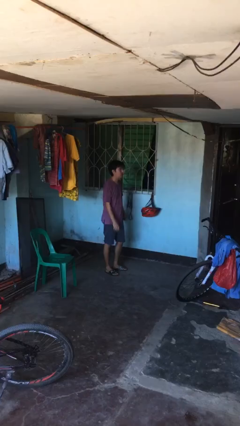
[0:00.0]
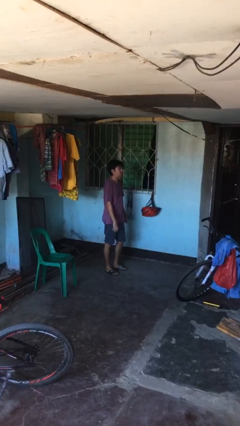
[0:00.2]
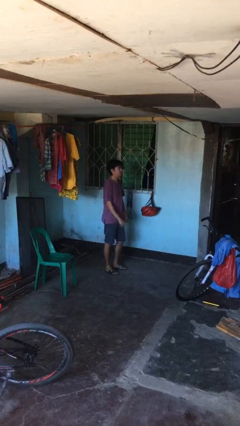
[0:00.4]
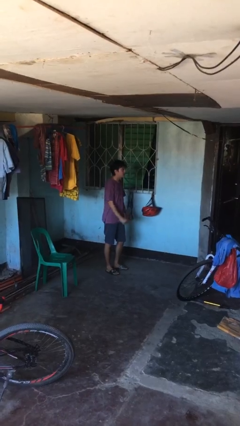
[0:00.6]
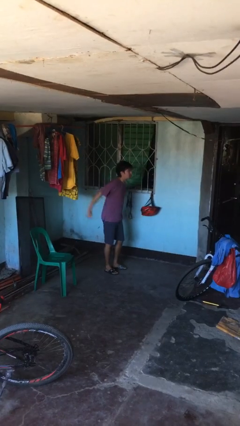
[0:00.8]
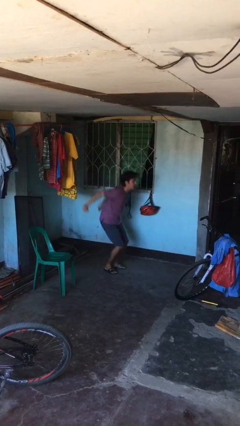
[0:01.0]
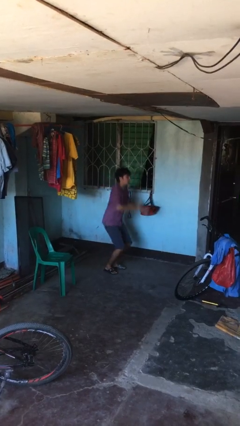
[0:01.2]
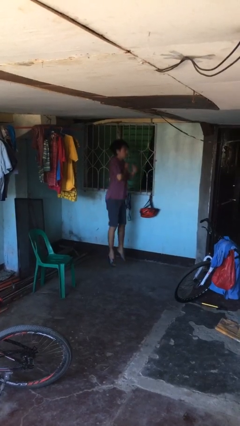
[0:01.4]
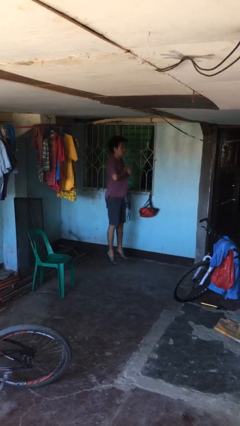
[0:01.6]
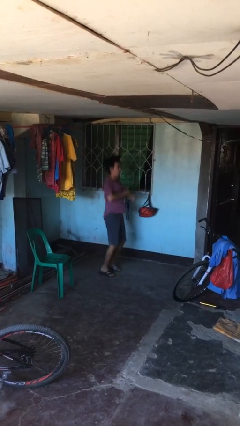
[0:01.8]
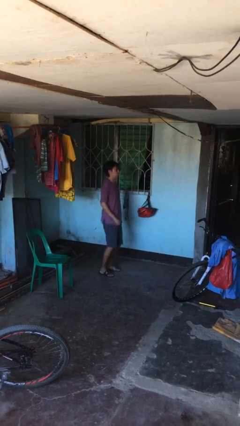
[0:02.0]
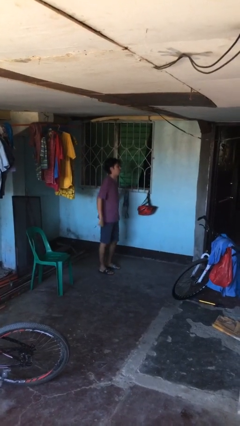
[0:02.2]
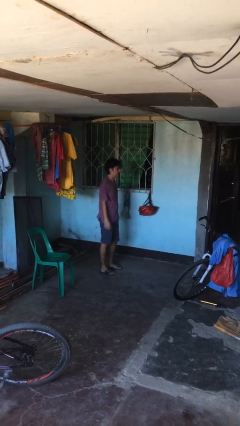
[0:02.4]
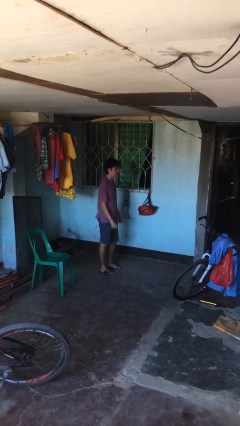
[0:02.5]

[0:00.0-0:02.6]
person jumps

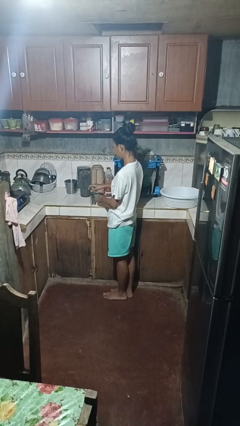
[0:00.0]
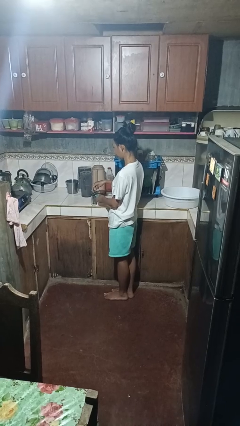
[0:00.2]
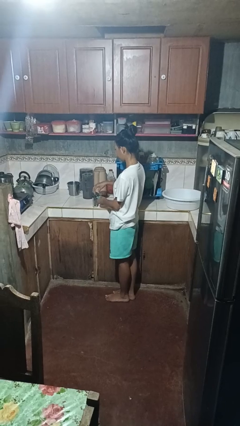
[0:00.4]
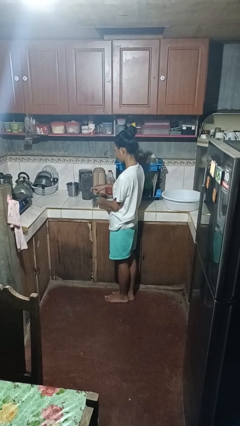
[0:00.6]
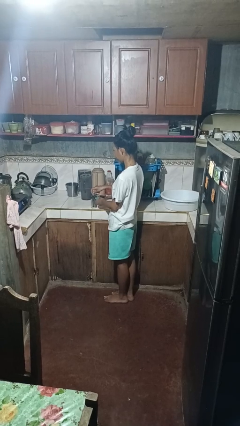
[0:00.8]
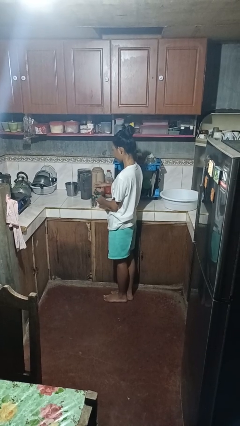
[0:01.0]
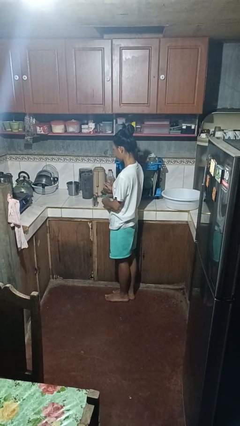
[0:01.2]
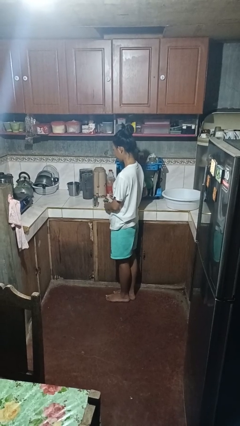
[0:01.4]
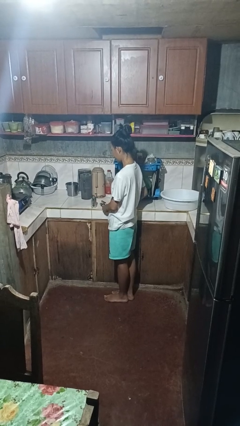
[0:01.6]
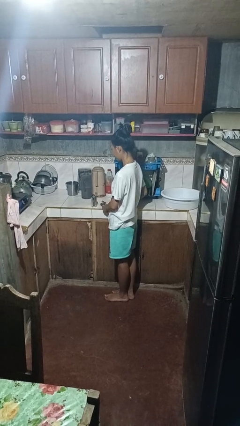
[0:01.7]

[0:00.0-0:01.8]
person opens can with can opener

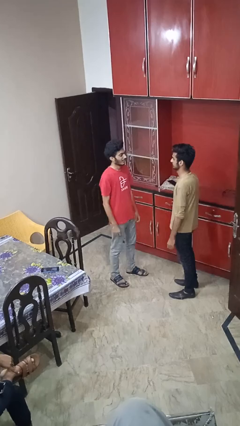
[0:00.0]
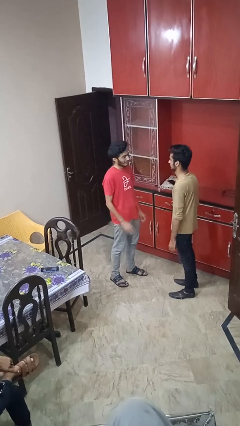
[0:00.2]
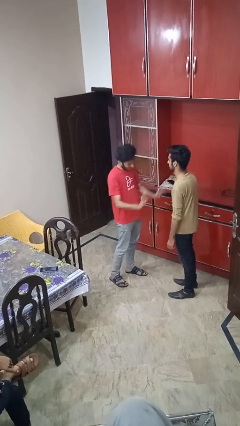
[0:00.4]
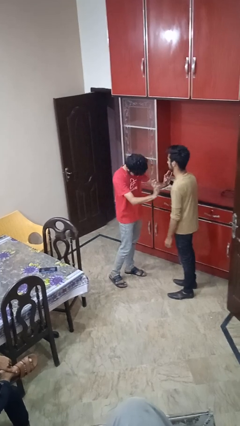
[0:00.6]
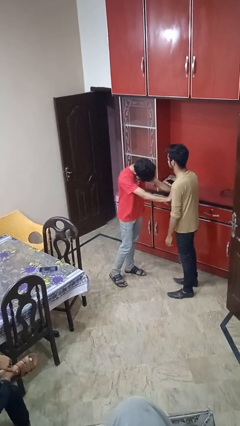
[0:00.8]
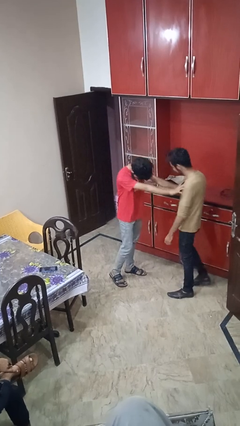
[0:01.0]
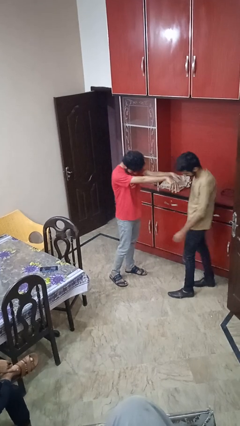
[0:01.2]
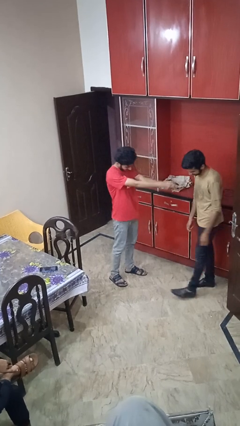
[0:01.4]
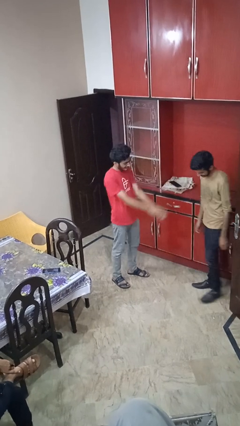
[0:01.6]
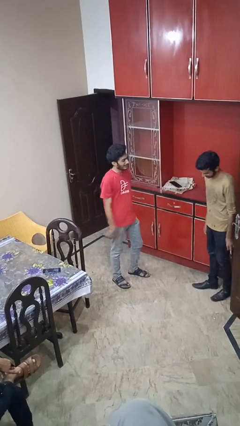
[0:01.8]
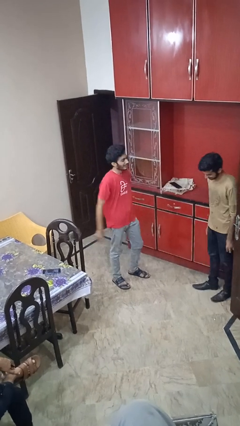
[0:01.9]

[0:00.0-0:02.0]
person shoves person

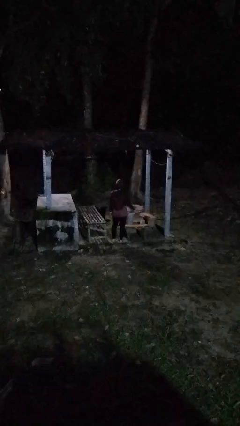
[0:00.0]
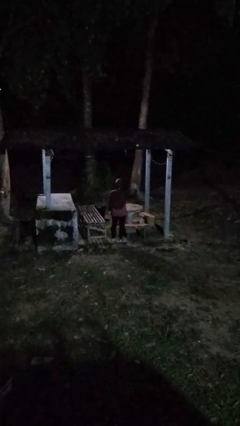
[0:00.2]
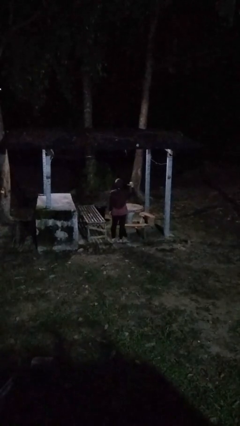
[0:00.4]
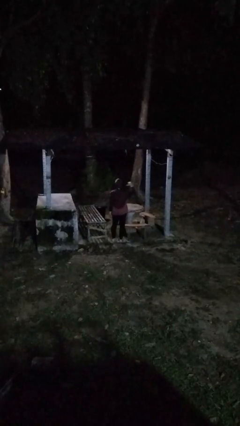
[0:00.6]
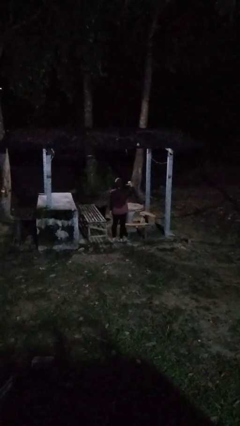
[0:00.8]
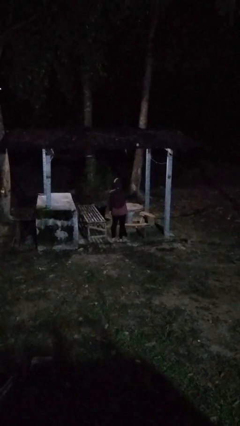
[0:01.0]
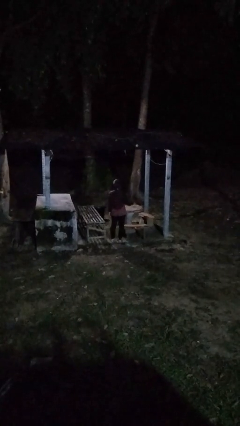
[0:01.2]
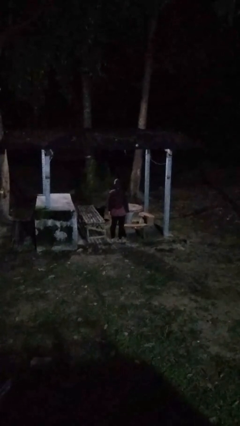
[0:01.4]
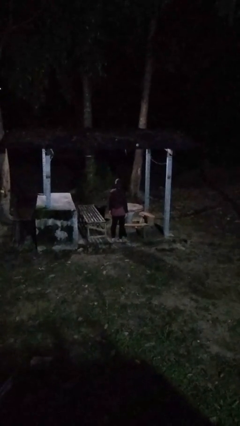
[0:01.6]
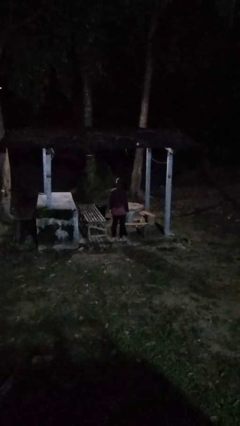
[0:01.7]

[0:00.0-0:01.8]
person gestures behind me

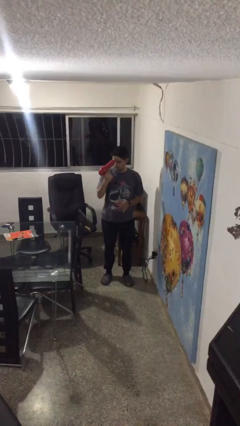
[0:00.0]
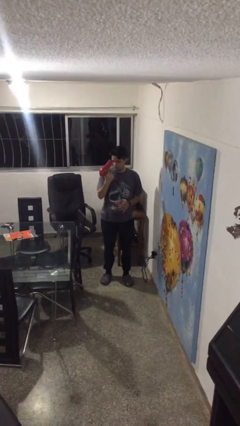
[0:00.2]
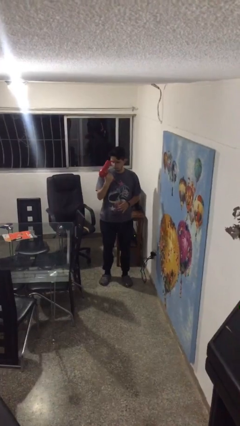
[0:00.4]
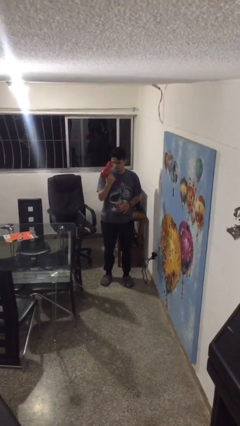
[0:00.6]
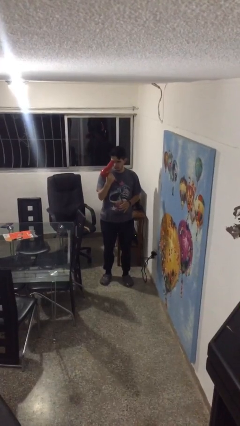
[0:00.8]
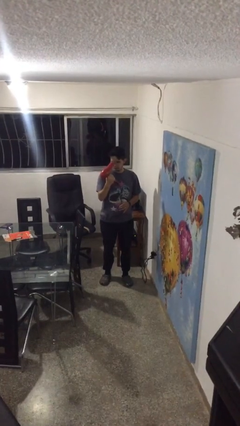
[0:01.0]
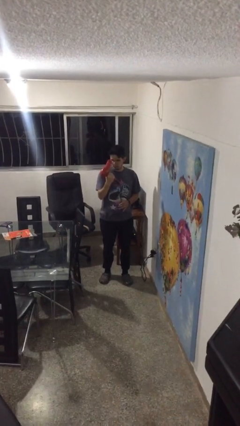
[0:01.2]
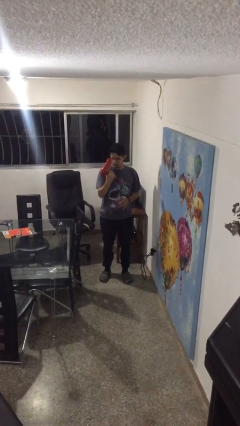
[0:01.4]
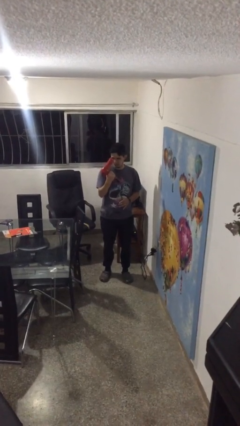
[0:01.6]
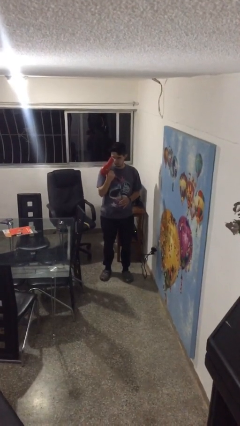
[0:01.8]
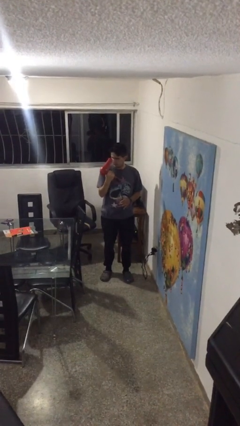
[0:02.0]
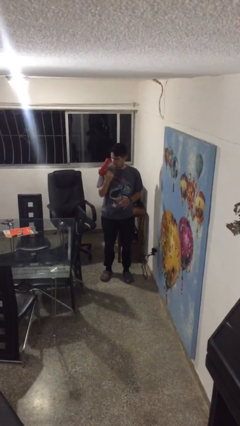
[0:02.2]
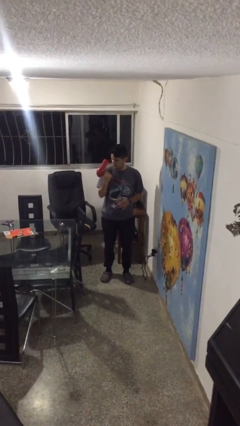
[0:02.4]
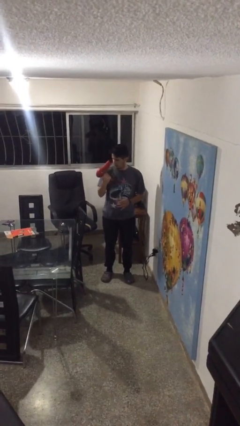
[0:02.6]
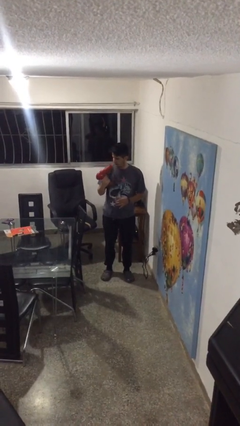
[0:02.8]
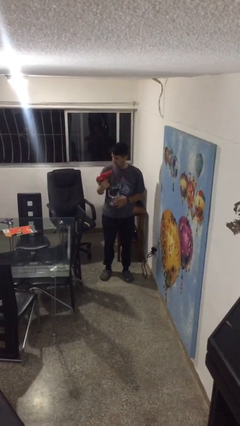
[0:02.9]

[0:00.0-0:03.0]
person dries hair with hairdryer

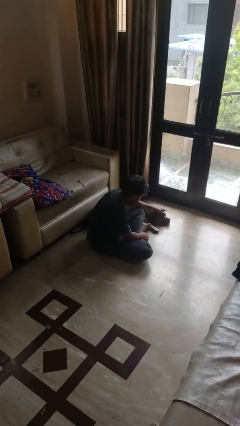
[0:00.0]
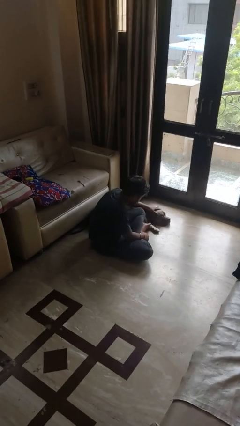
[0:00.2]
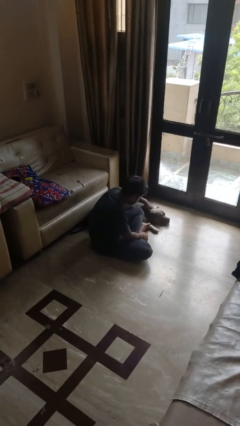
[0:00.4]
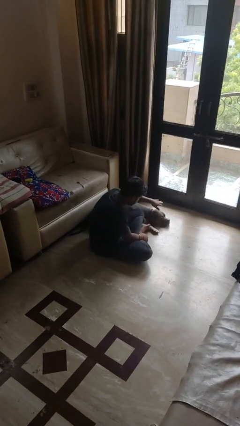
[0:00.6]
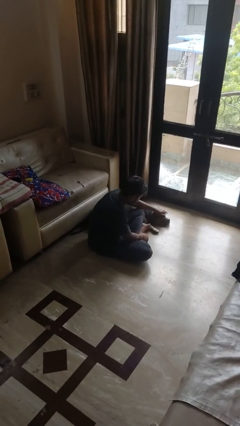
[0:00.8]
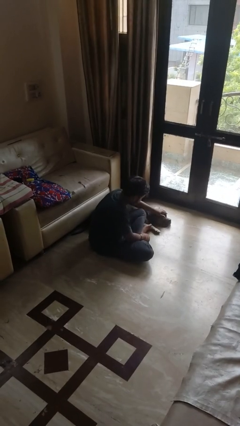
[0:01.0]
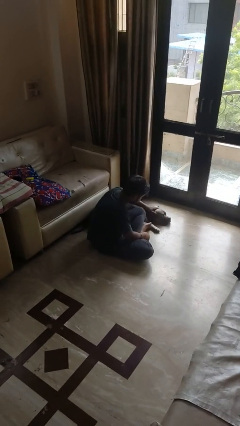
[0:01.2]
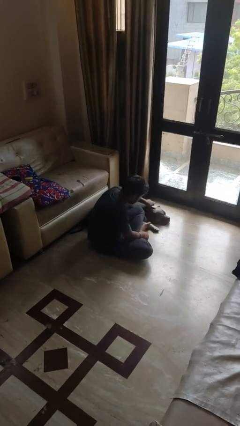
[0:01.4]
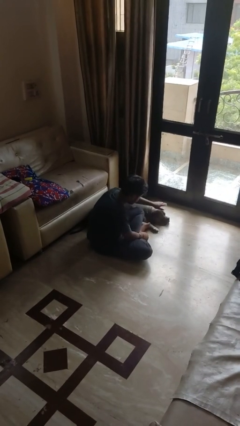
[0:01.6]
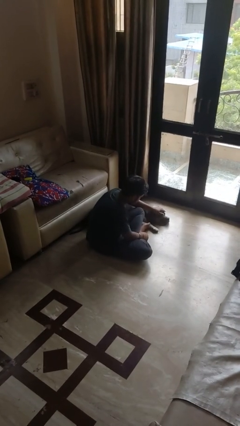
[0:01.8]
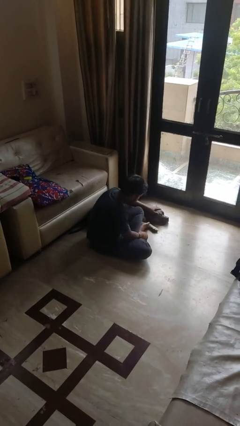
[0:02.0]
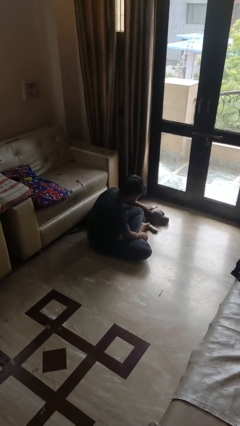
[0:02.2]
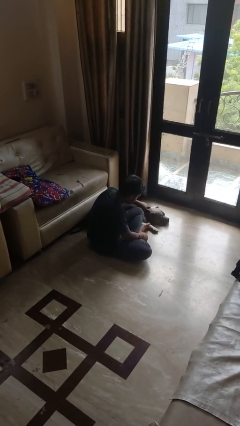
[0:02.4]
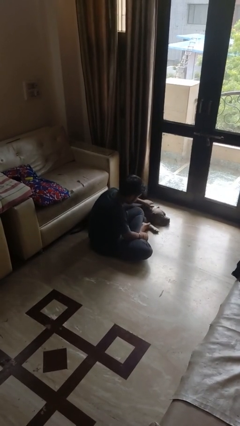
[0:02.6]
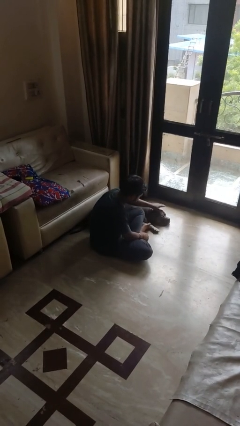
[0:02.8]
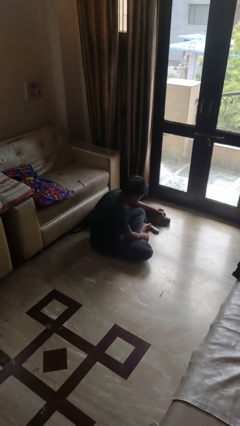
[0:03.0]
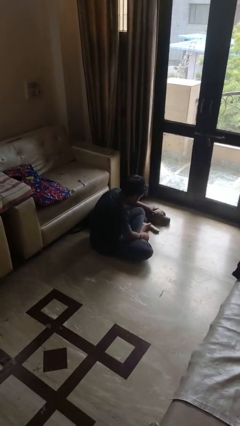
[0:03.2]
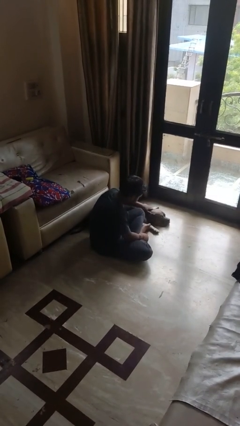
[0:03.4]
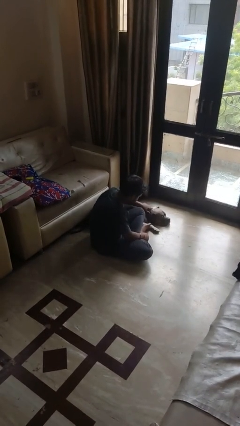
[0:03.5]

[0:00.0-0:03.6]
person pets dog

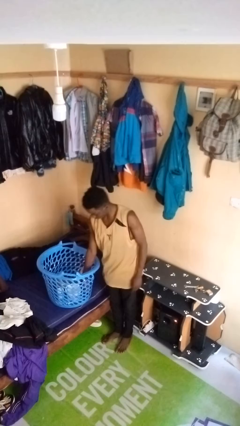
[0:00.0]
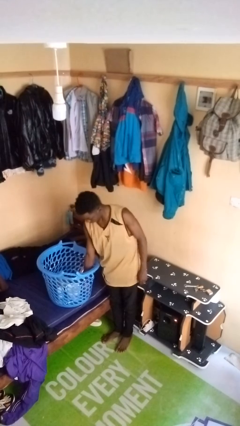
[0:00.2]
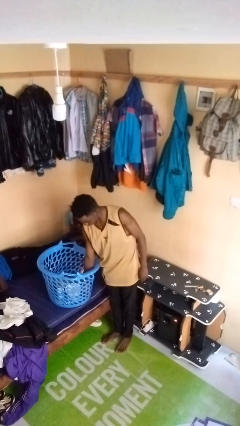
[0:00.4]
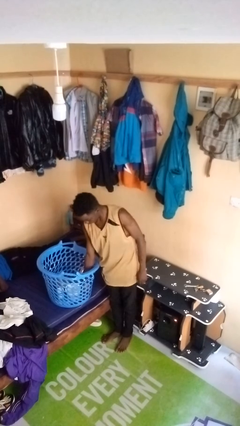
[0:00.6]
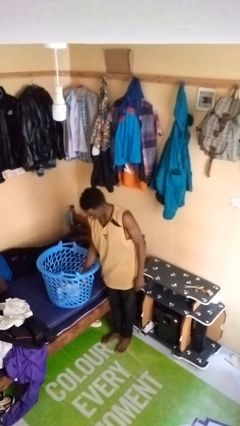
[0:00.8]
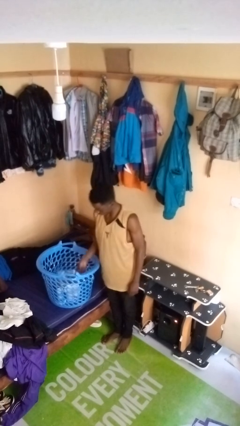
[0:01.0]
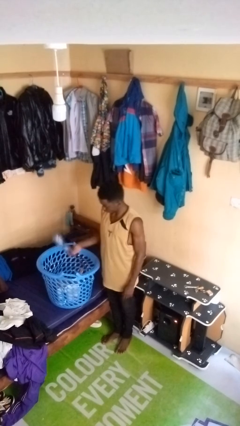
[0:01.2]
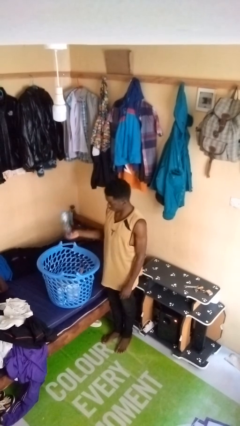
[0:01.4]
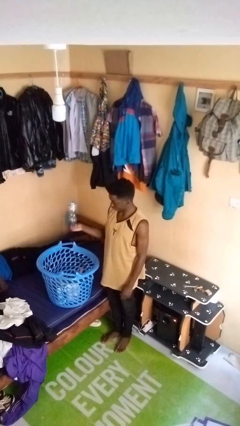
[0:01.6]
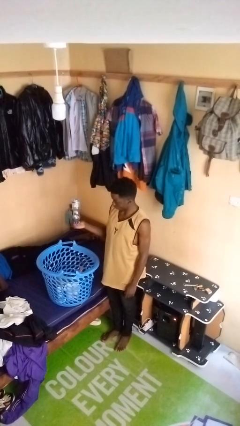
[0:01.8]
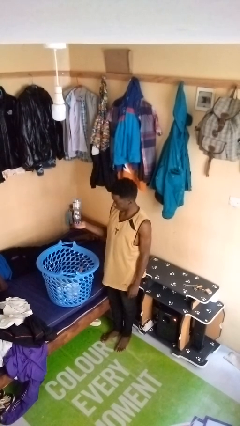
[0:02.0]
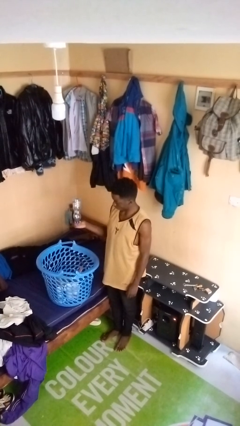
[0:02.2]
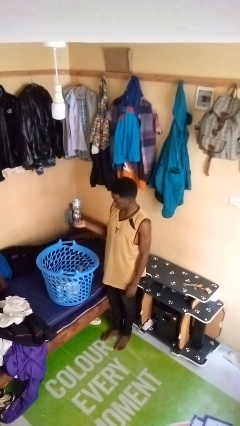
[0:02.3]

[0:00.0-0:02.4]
person takes object from basket
